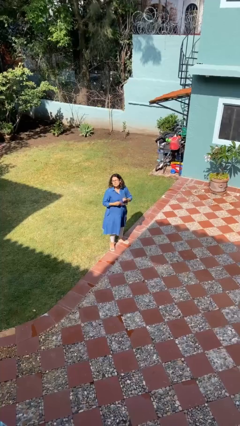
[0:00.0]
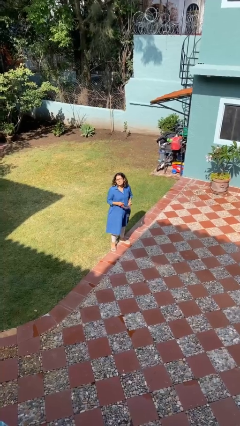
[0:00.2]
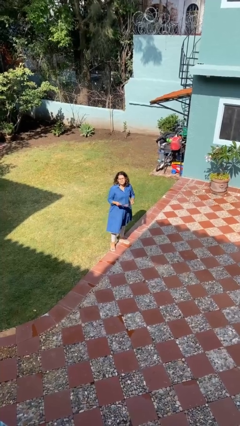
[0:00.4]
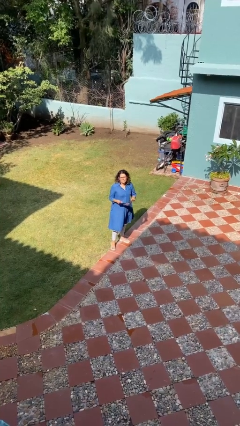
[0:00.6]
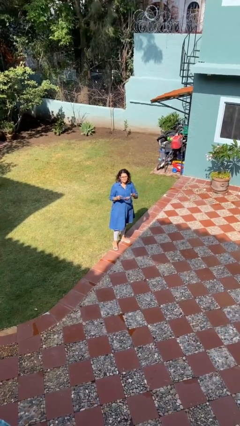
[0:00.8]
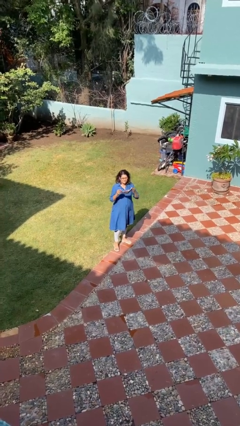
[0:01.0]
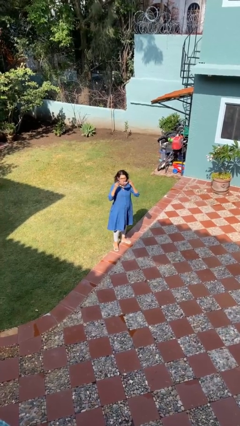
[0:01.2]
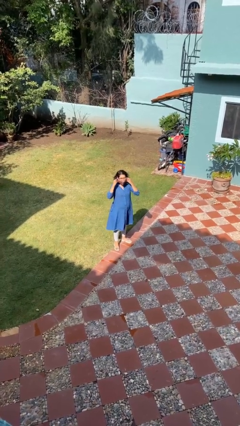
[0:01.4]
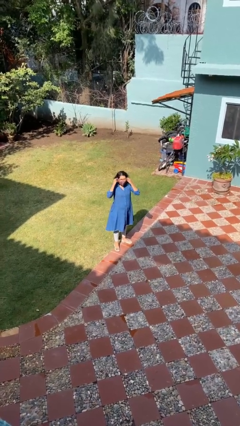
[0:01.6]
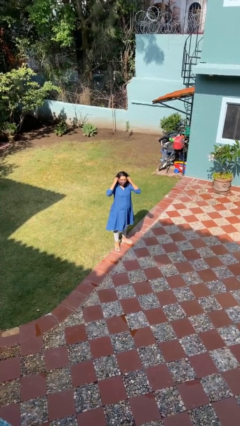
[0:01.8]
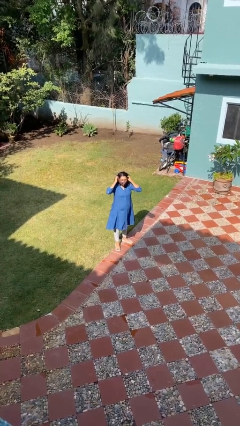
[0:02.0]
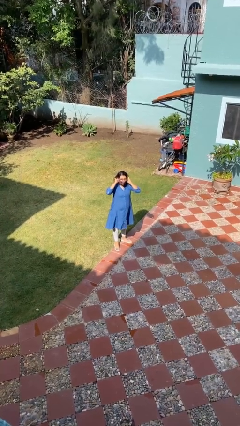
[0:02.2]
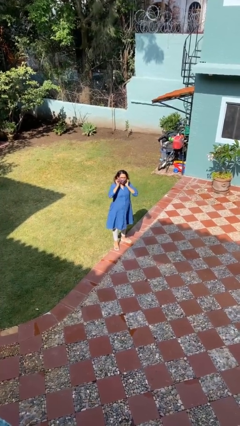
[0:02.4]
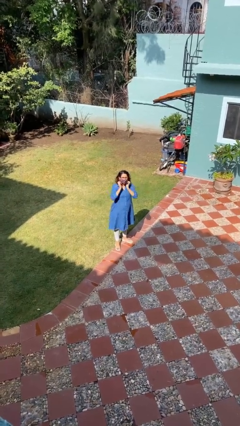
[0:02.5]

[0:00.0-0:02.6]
person puts on facemask

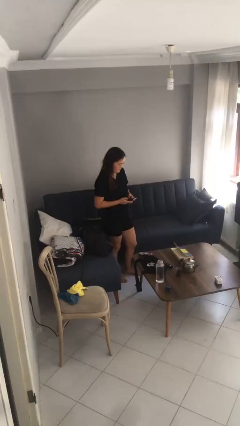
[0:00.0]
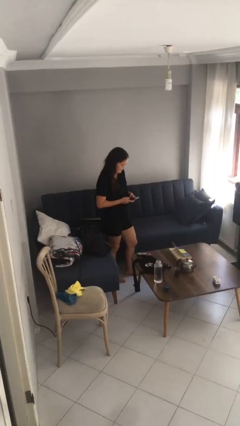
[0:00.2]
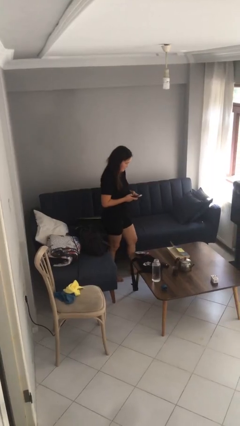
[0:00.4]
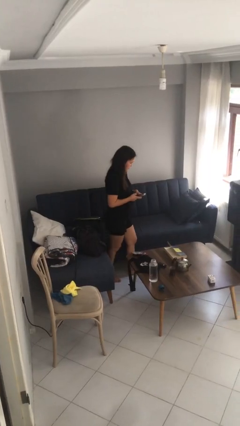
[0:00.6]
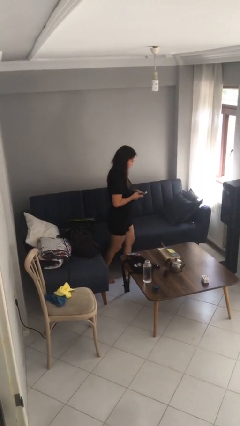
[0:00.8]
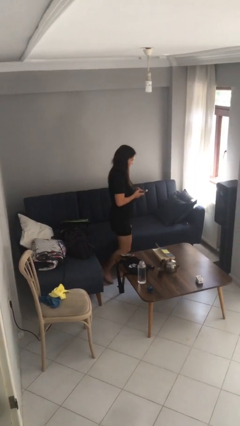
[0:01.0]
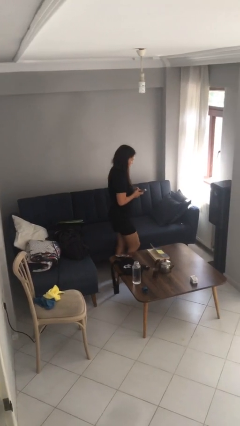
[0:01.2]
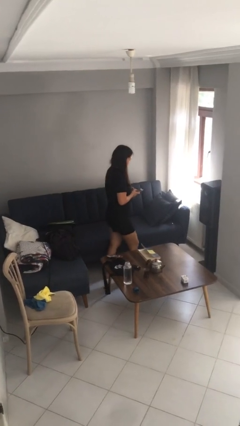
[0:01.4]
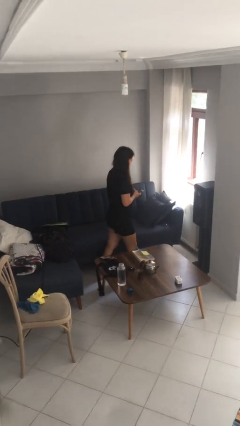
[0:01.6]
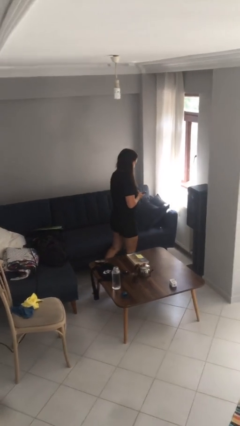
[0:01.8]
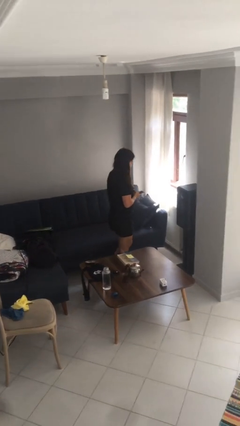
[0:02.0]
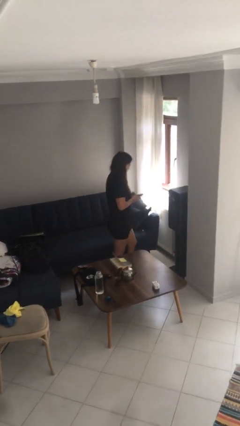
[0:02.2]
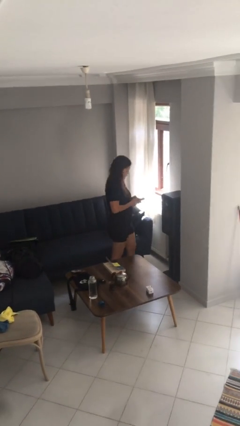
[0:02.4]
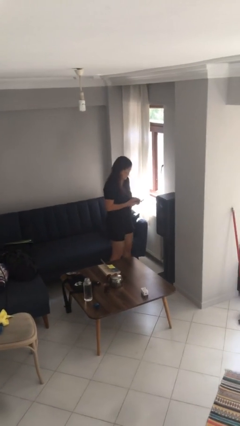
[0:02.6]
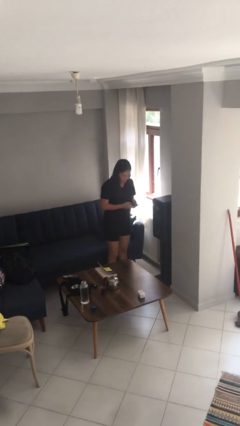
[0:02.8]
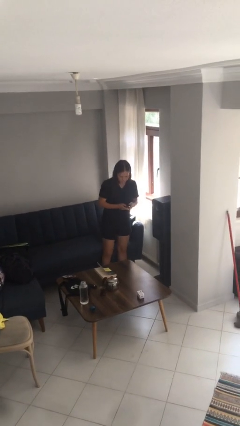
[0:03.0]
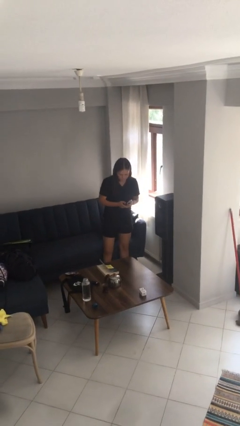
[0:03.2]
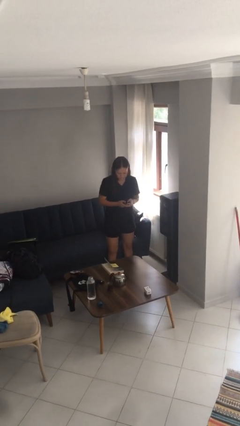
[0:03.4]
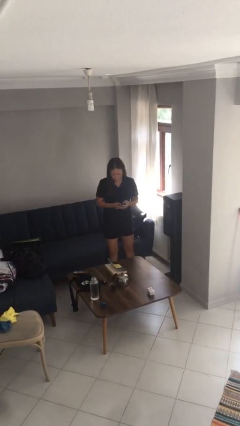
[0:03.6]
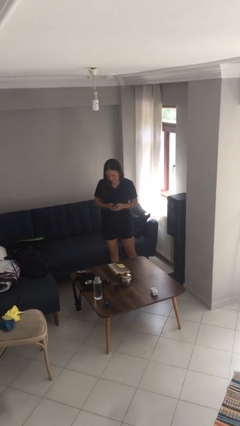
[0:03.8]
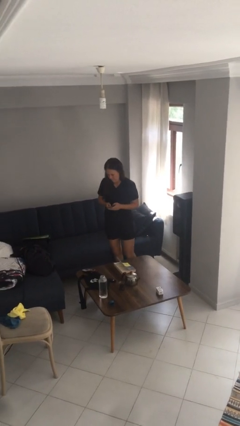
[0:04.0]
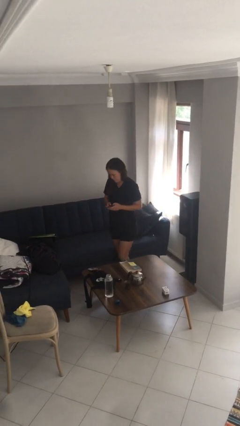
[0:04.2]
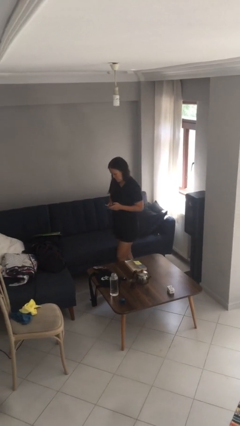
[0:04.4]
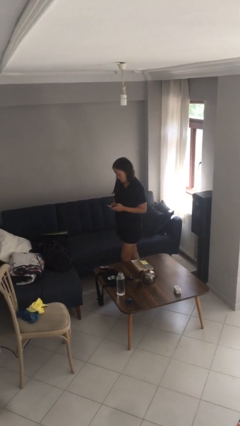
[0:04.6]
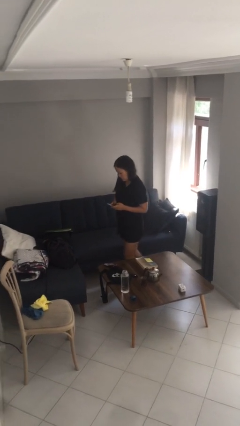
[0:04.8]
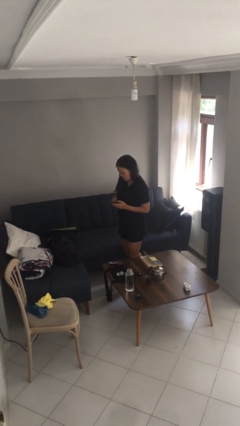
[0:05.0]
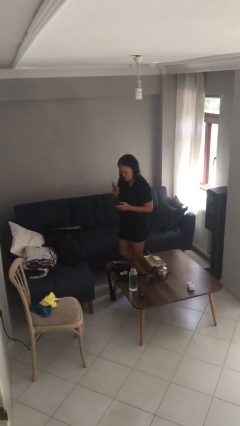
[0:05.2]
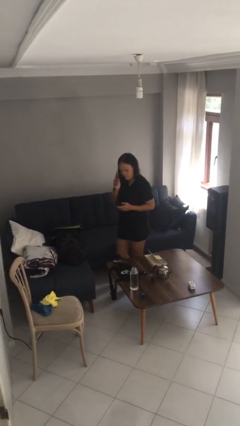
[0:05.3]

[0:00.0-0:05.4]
person texts on phone

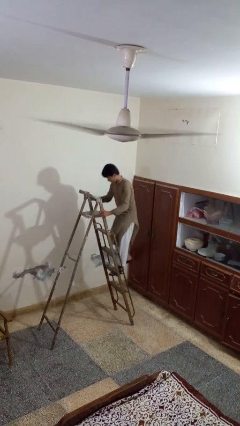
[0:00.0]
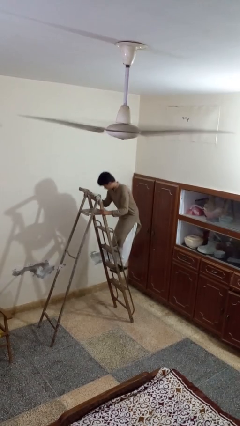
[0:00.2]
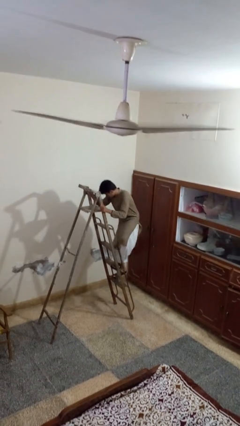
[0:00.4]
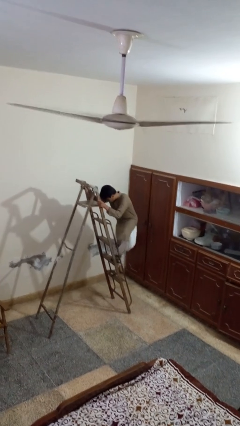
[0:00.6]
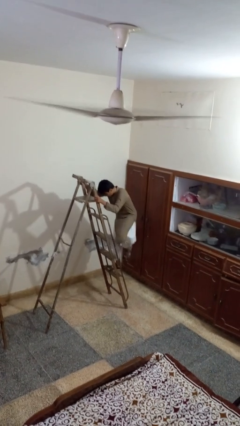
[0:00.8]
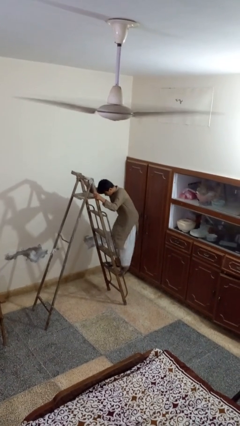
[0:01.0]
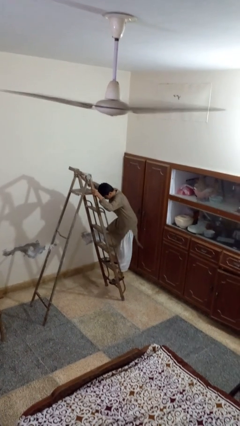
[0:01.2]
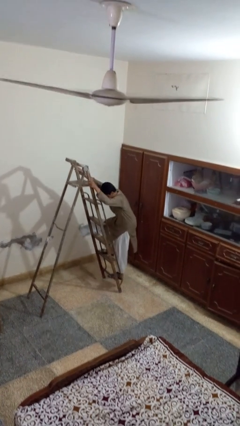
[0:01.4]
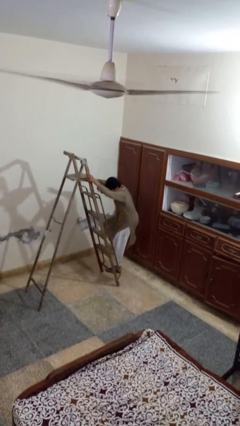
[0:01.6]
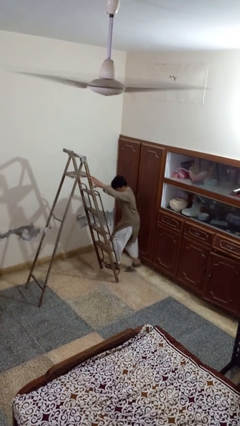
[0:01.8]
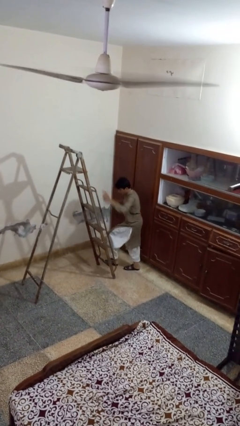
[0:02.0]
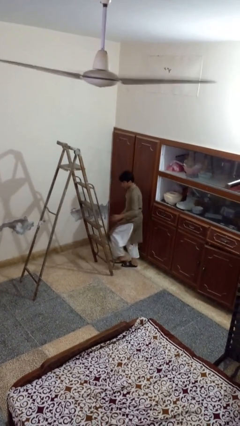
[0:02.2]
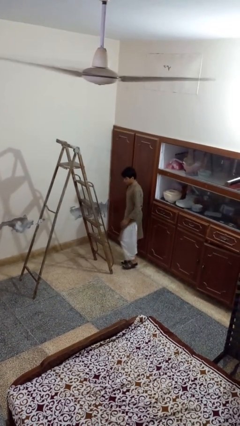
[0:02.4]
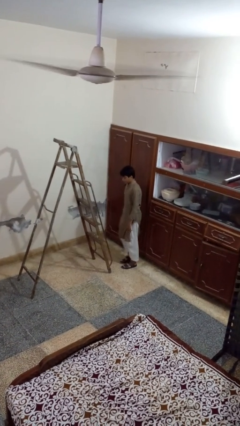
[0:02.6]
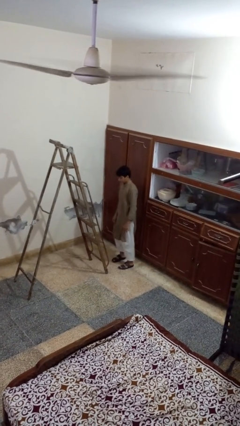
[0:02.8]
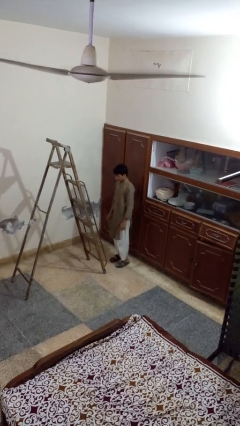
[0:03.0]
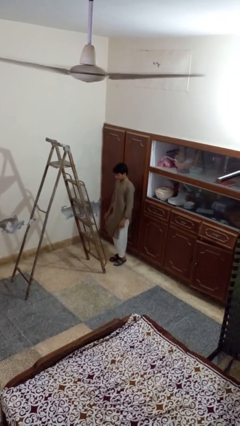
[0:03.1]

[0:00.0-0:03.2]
person climbs down ladder

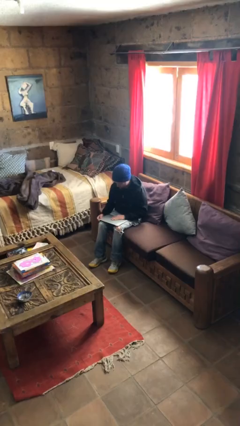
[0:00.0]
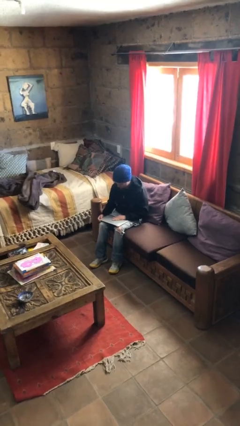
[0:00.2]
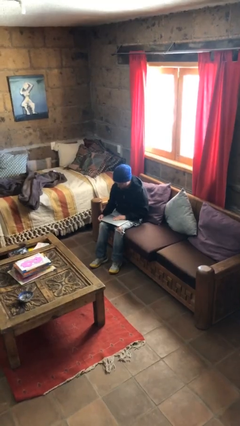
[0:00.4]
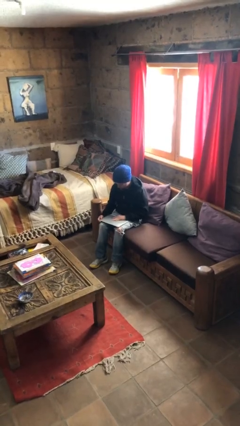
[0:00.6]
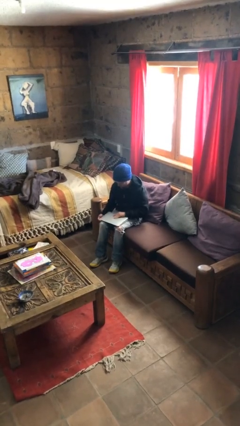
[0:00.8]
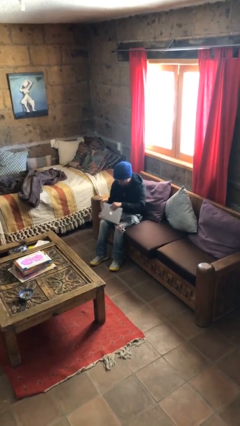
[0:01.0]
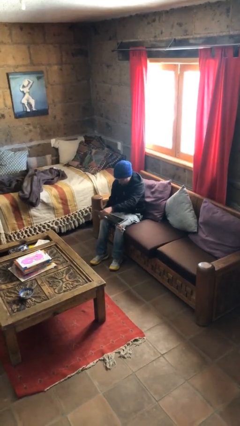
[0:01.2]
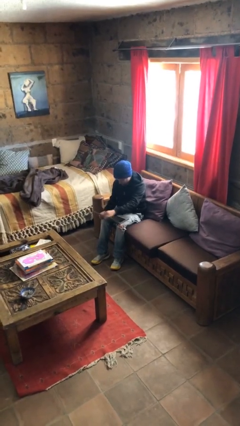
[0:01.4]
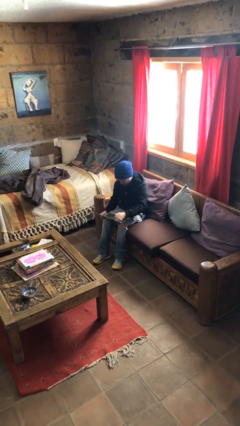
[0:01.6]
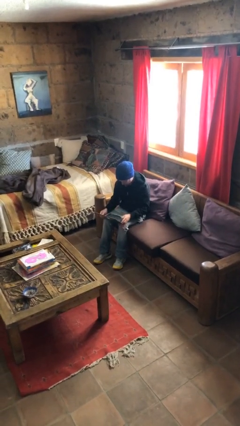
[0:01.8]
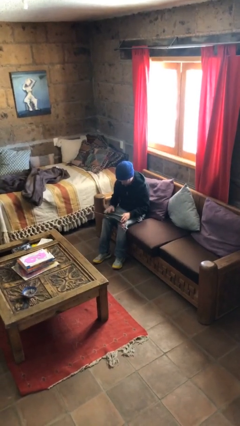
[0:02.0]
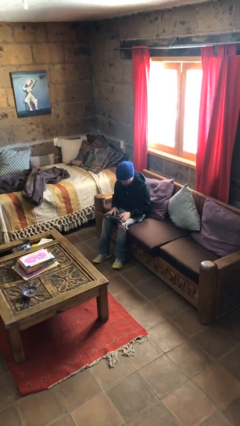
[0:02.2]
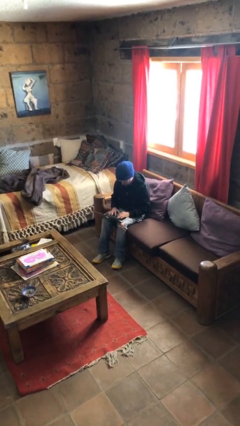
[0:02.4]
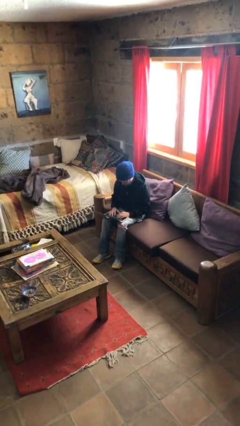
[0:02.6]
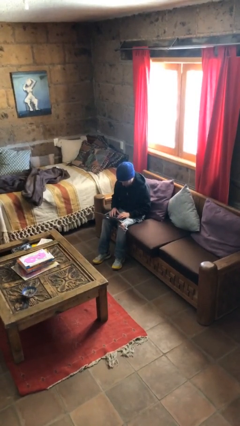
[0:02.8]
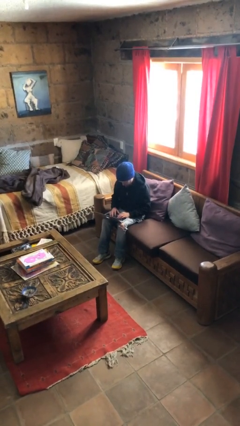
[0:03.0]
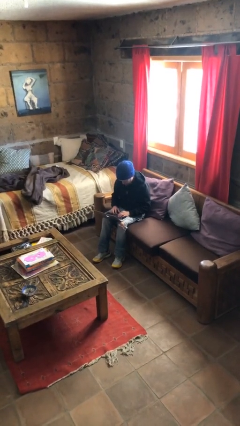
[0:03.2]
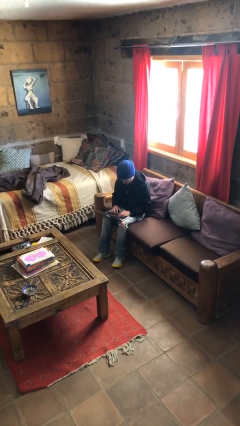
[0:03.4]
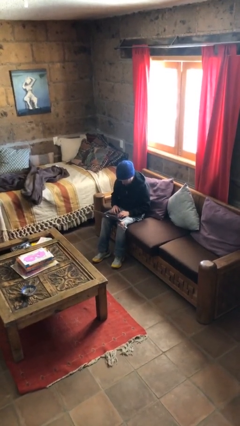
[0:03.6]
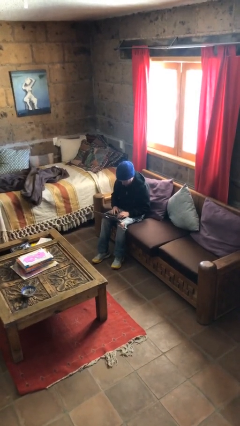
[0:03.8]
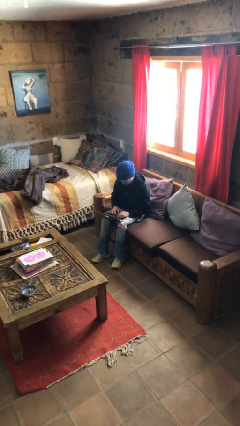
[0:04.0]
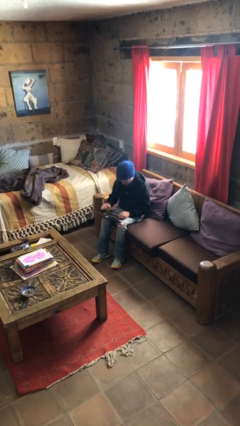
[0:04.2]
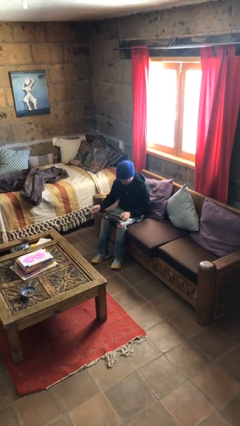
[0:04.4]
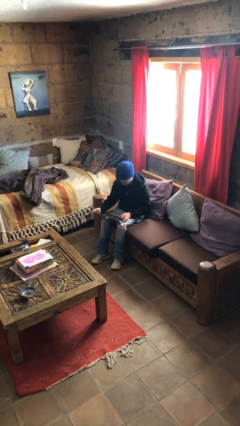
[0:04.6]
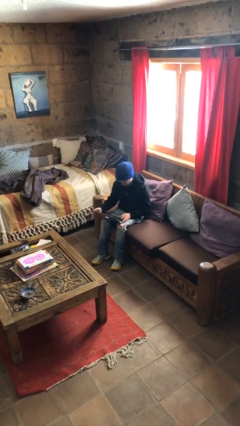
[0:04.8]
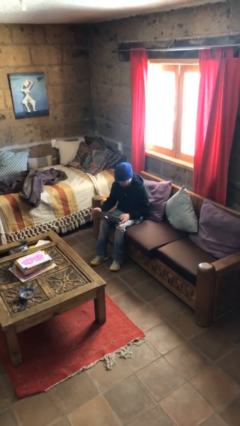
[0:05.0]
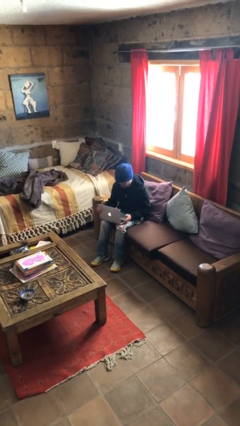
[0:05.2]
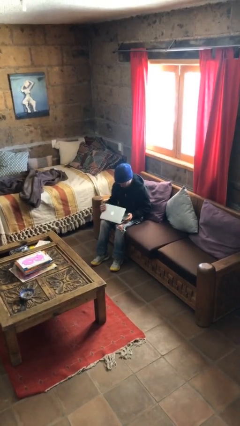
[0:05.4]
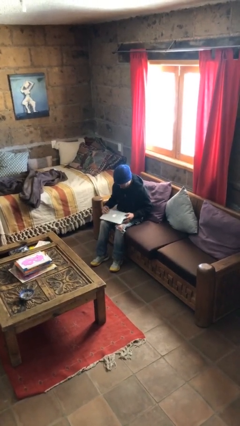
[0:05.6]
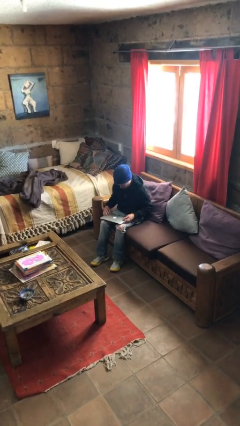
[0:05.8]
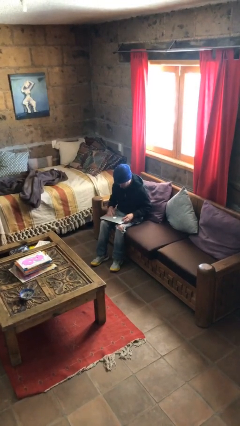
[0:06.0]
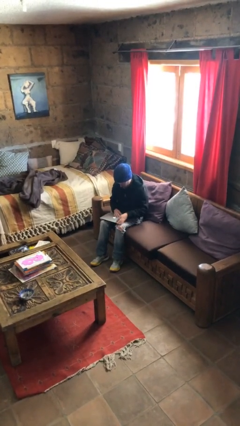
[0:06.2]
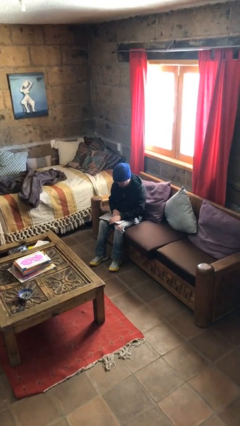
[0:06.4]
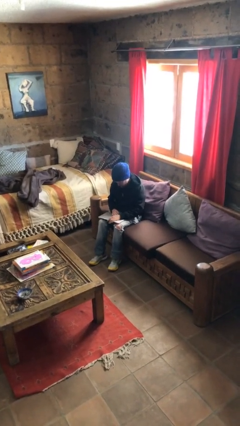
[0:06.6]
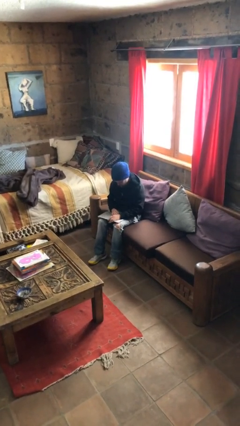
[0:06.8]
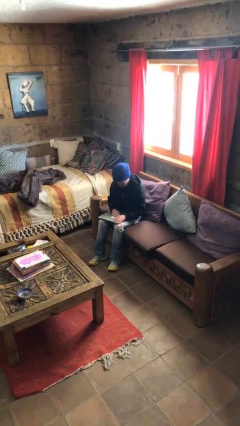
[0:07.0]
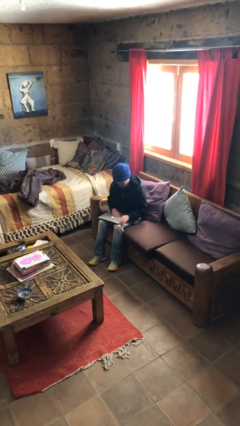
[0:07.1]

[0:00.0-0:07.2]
person interacts with laptop
